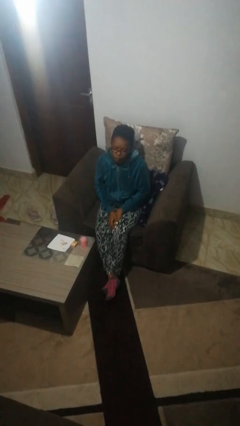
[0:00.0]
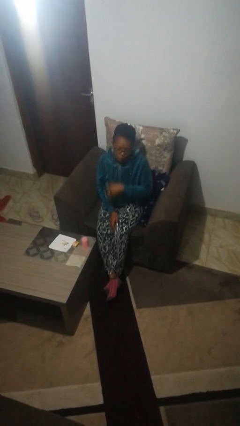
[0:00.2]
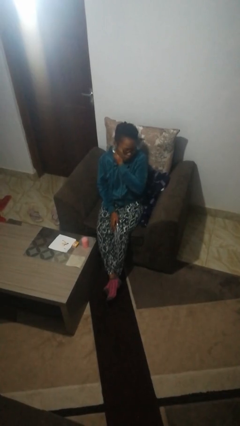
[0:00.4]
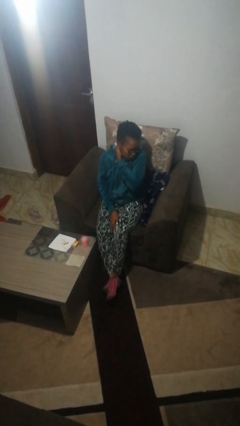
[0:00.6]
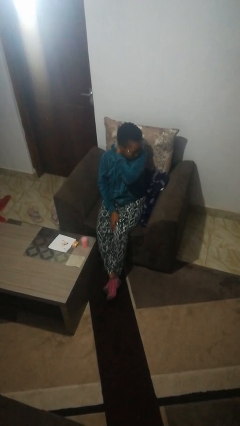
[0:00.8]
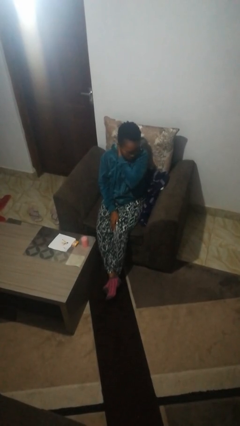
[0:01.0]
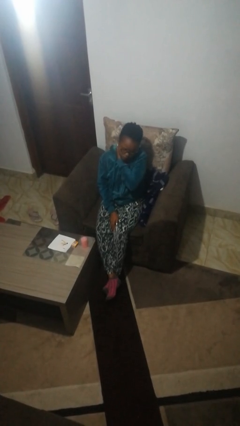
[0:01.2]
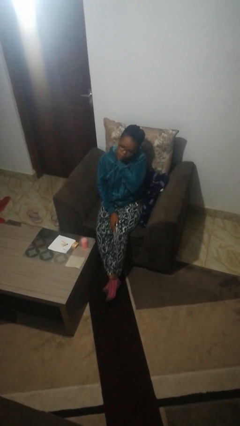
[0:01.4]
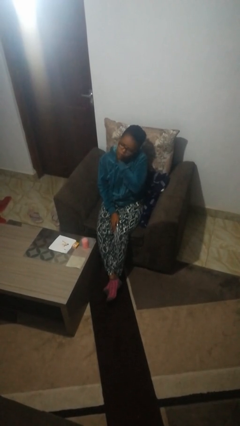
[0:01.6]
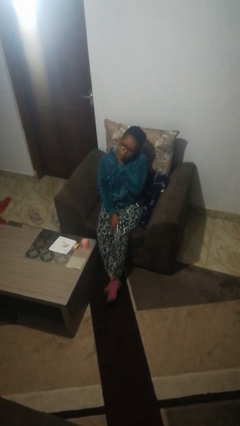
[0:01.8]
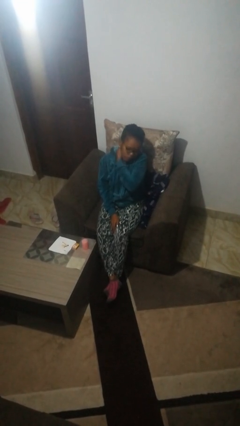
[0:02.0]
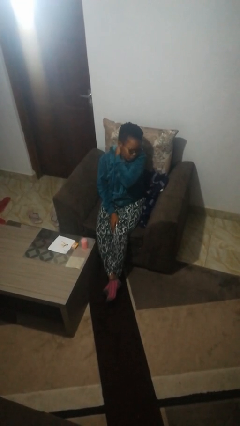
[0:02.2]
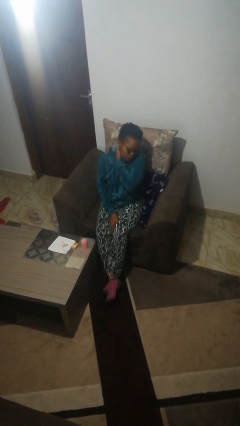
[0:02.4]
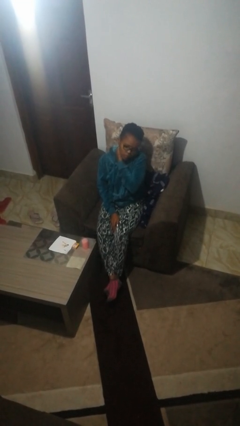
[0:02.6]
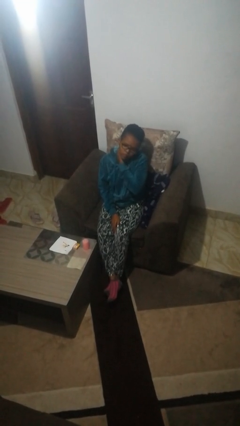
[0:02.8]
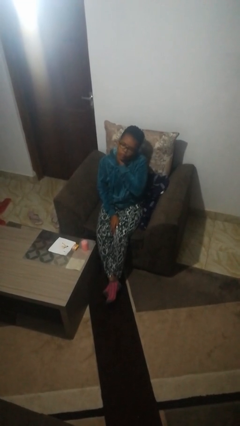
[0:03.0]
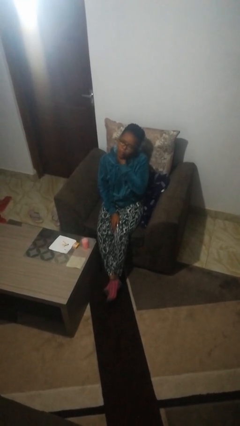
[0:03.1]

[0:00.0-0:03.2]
person rubs neck

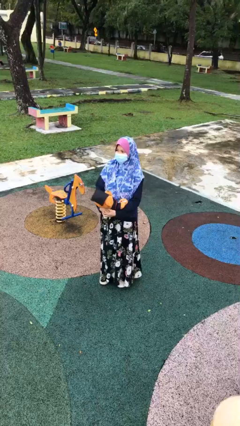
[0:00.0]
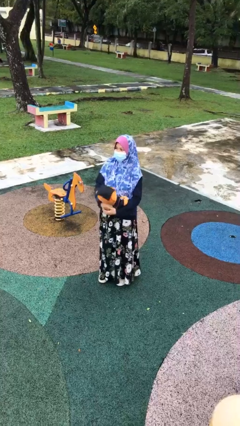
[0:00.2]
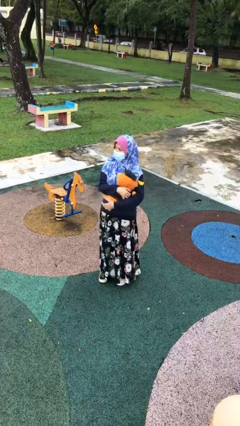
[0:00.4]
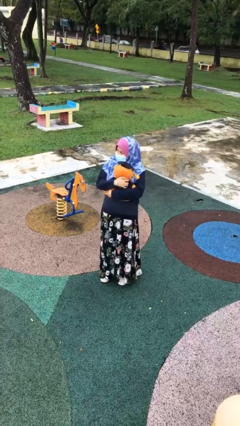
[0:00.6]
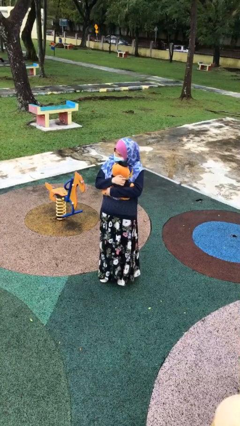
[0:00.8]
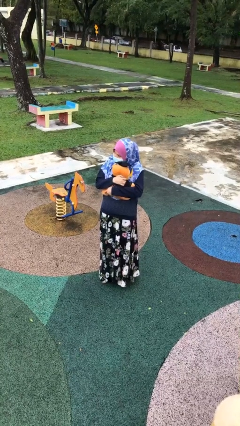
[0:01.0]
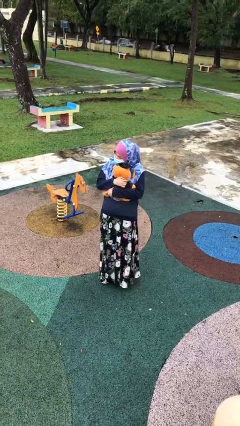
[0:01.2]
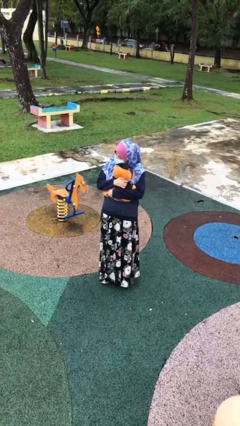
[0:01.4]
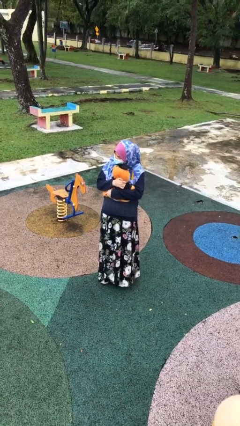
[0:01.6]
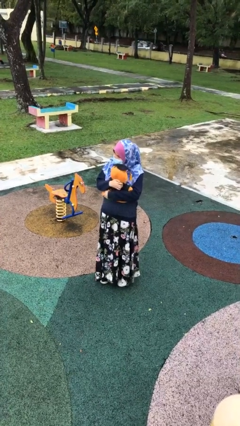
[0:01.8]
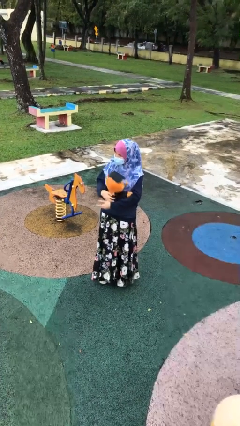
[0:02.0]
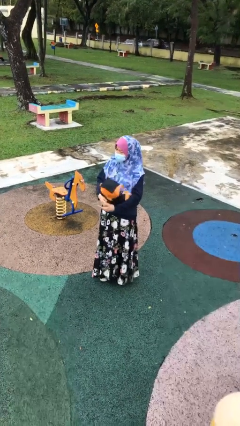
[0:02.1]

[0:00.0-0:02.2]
person hugs stuffed animal

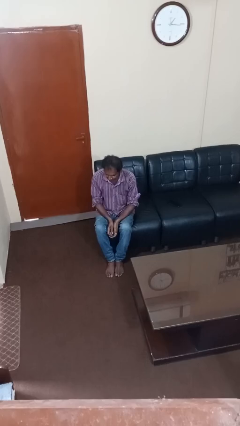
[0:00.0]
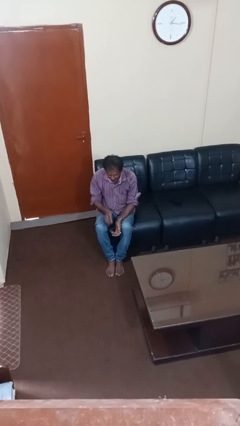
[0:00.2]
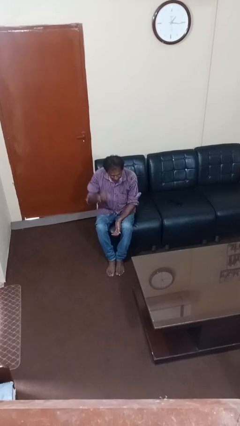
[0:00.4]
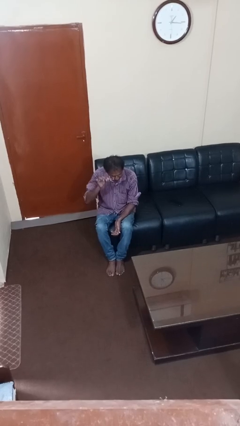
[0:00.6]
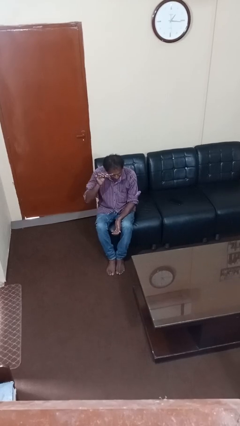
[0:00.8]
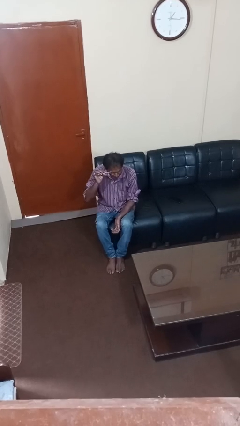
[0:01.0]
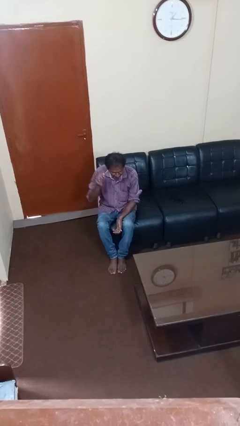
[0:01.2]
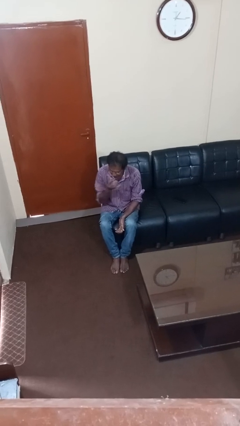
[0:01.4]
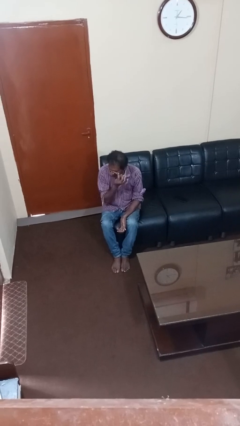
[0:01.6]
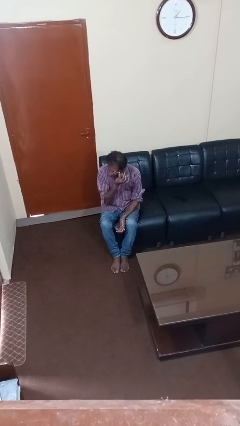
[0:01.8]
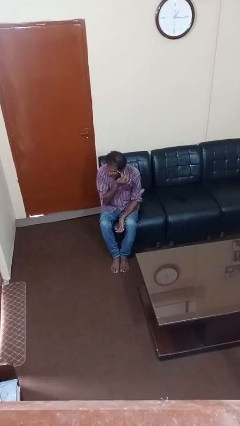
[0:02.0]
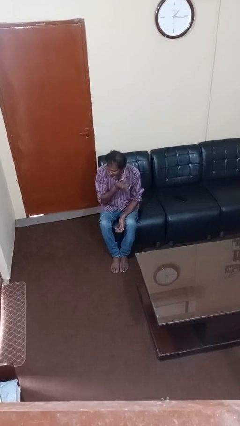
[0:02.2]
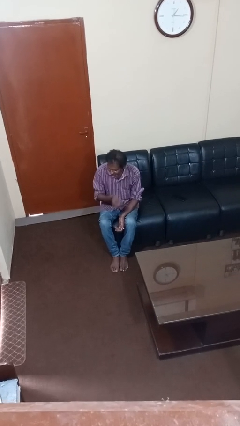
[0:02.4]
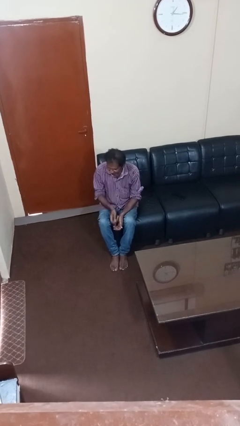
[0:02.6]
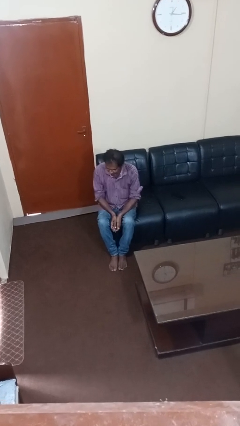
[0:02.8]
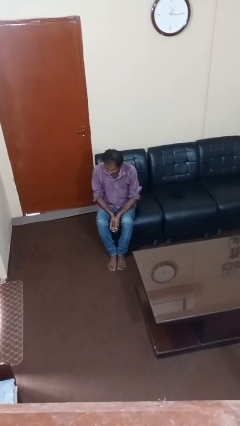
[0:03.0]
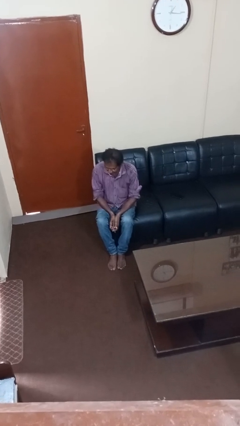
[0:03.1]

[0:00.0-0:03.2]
person applies eye makeup

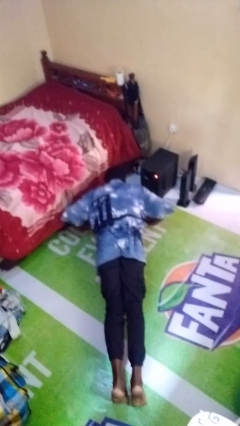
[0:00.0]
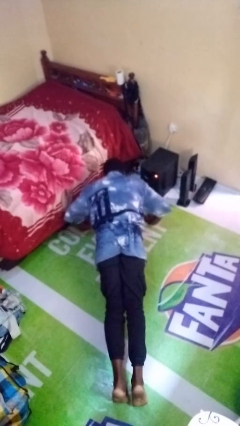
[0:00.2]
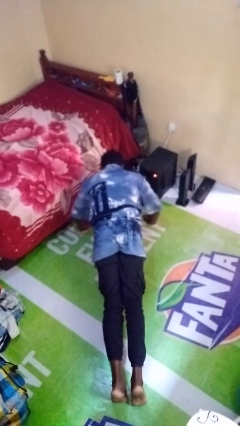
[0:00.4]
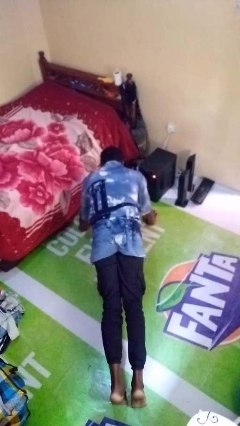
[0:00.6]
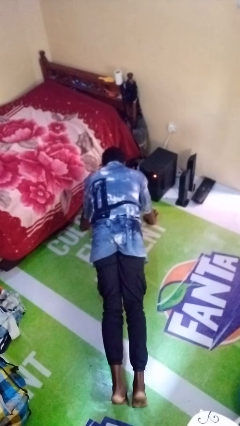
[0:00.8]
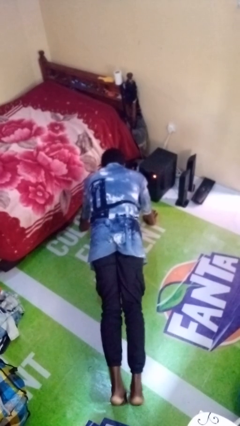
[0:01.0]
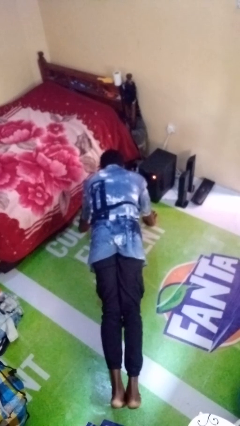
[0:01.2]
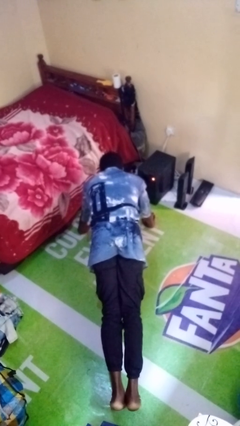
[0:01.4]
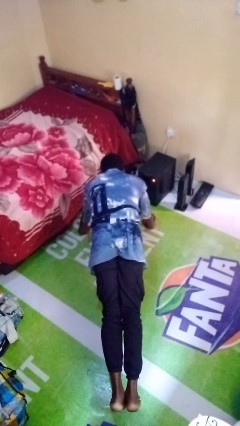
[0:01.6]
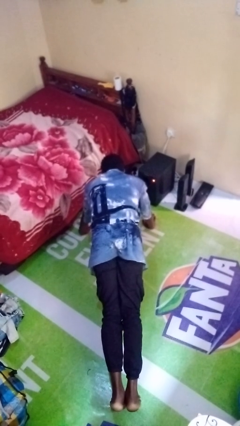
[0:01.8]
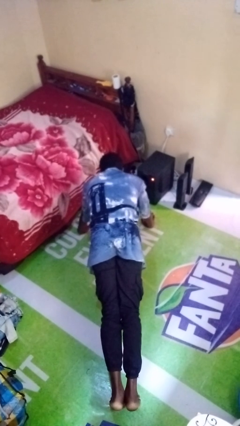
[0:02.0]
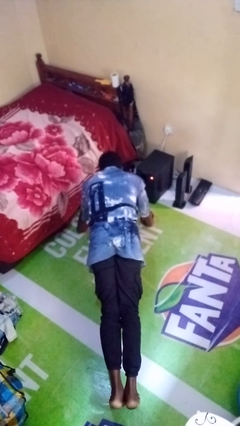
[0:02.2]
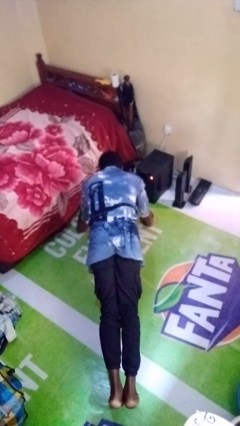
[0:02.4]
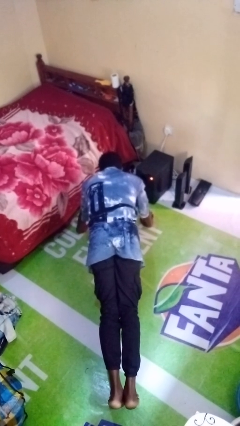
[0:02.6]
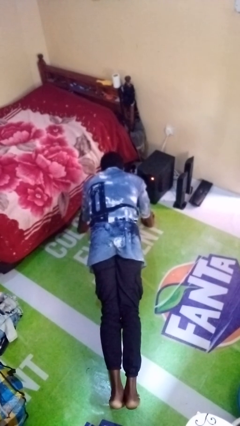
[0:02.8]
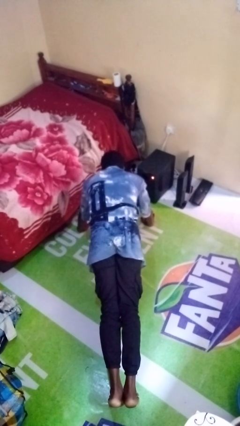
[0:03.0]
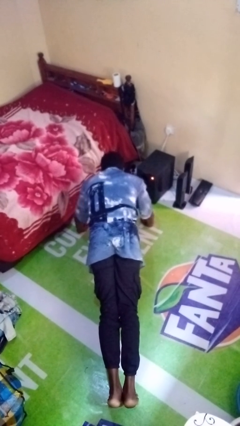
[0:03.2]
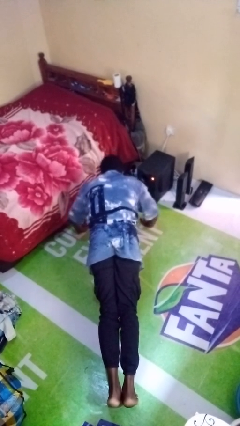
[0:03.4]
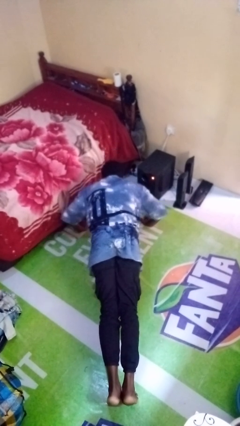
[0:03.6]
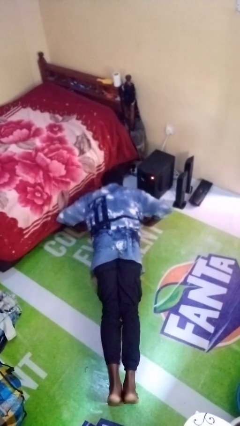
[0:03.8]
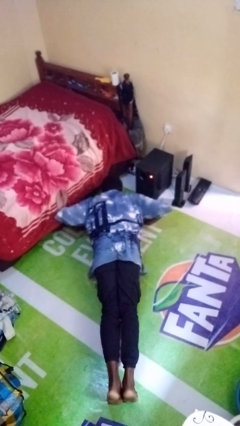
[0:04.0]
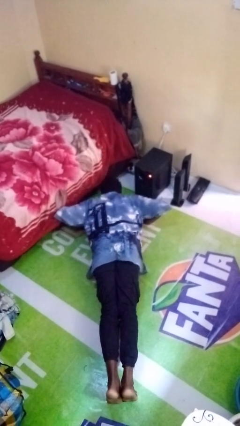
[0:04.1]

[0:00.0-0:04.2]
person exercises with pushup

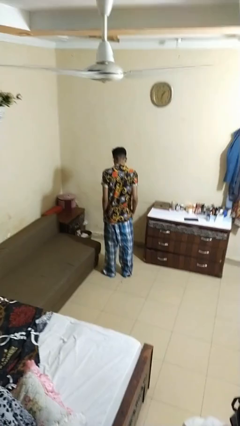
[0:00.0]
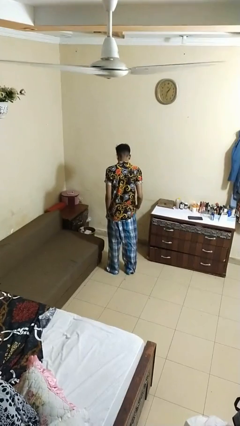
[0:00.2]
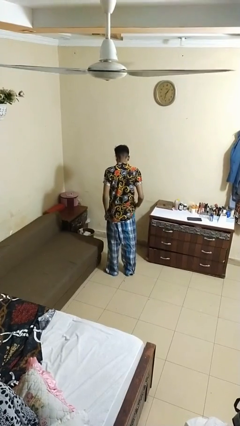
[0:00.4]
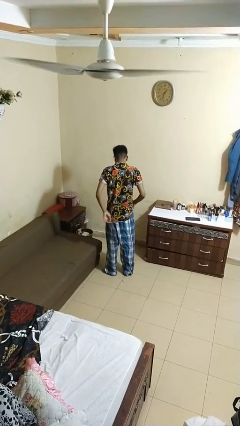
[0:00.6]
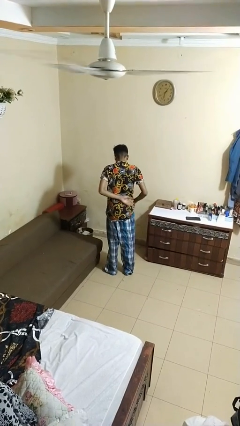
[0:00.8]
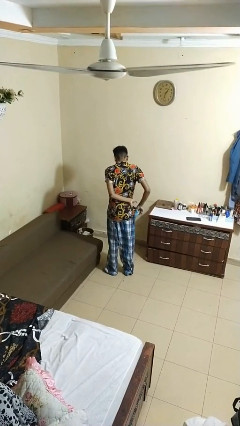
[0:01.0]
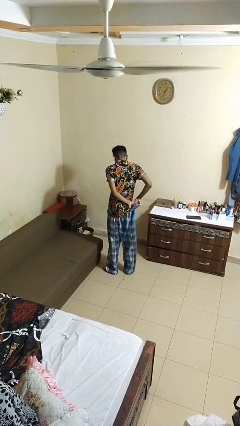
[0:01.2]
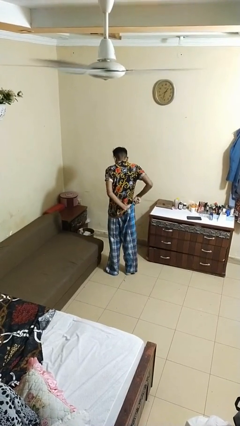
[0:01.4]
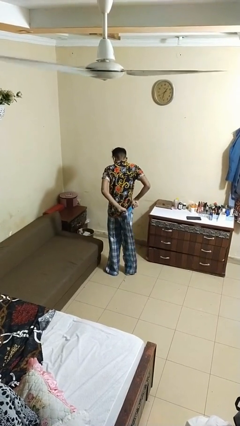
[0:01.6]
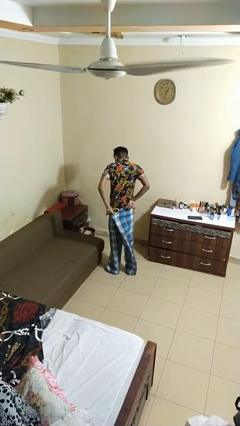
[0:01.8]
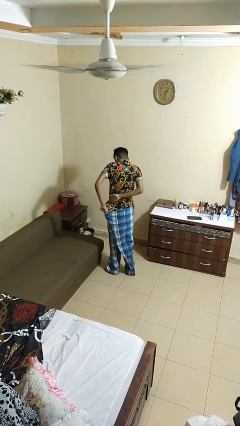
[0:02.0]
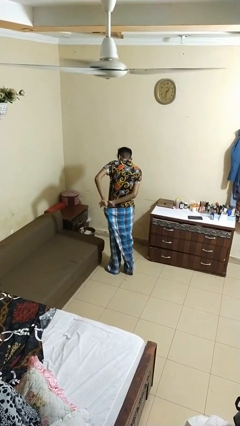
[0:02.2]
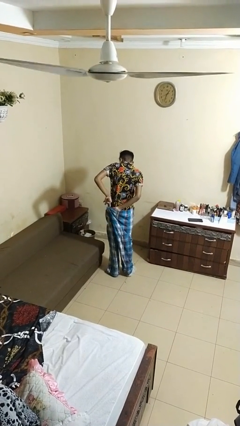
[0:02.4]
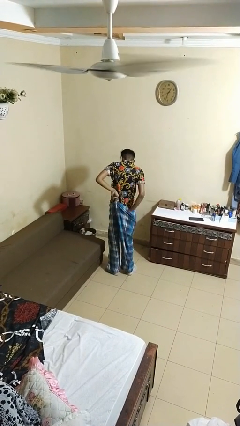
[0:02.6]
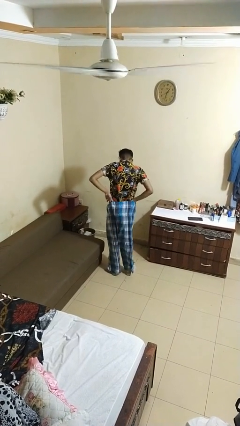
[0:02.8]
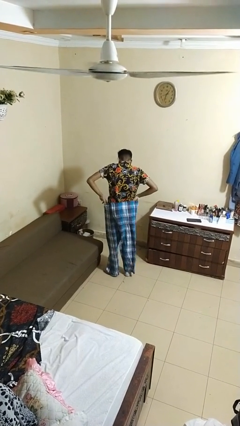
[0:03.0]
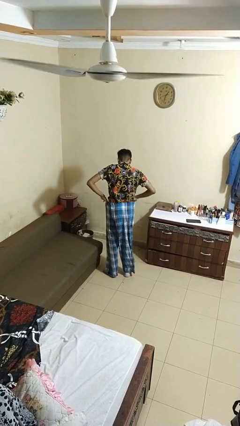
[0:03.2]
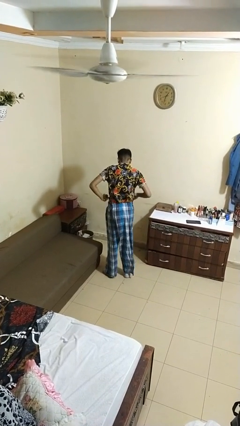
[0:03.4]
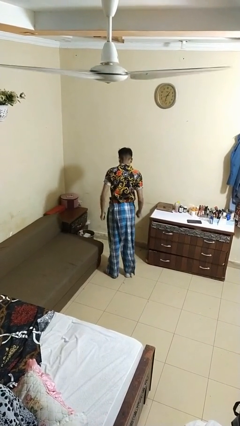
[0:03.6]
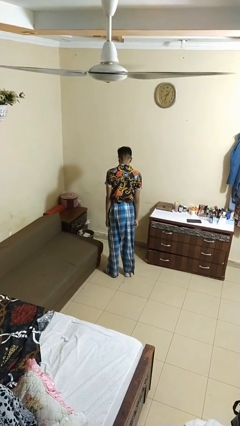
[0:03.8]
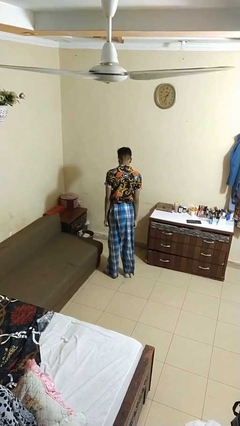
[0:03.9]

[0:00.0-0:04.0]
person tucks in shirt

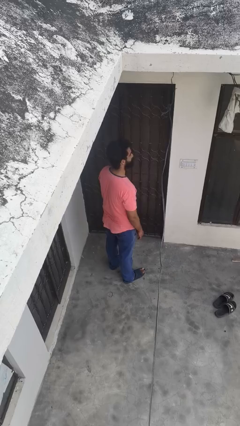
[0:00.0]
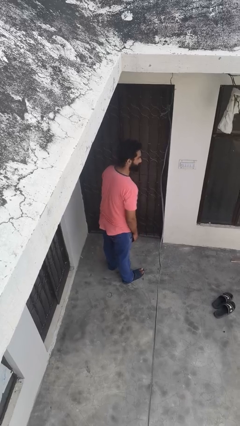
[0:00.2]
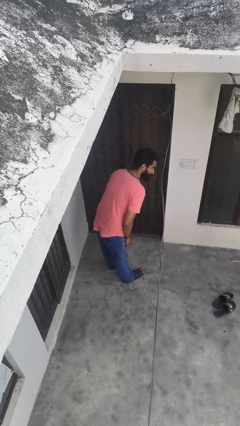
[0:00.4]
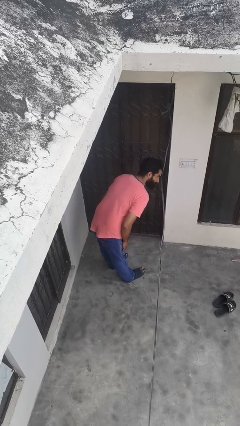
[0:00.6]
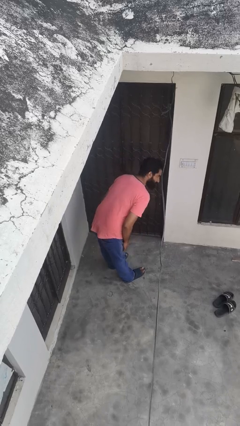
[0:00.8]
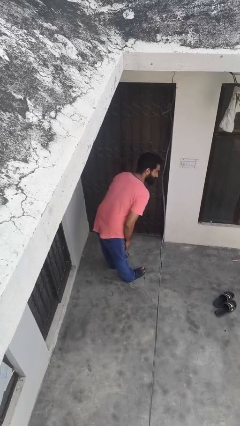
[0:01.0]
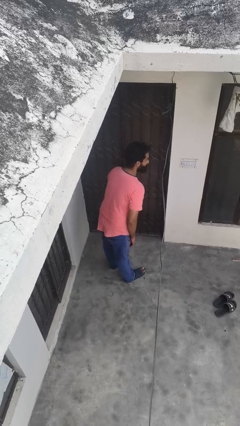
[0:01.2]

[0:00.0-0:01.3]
person bows
